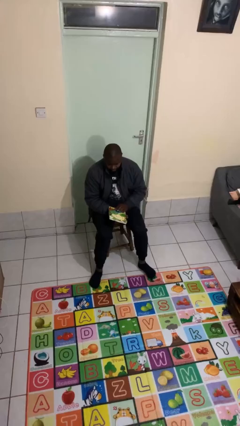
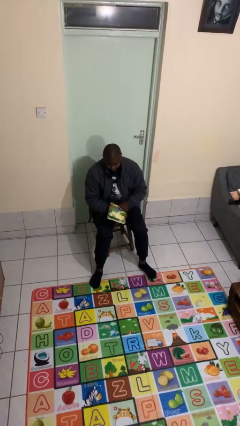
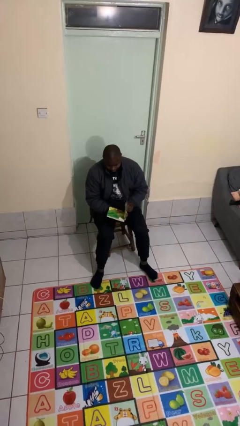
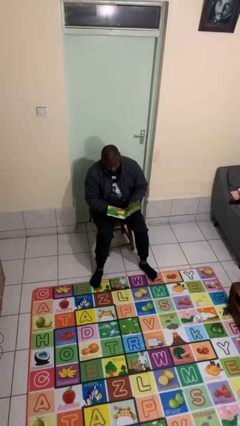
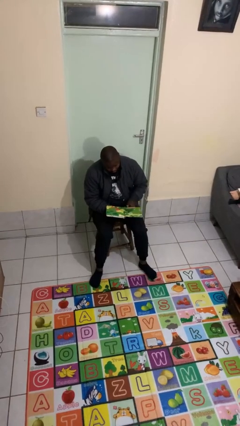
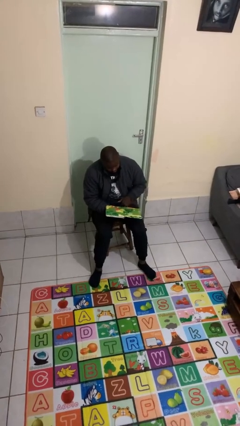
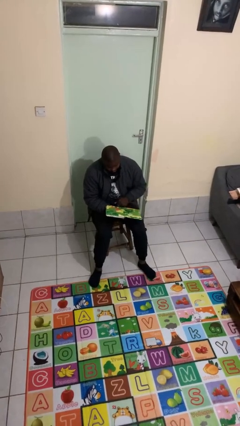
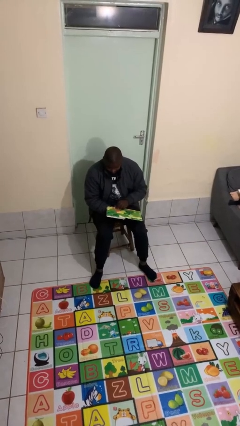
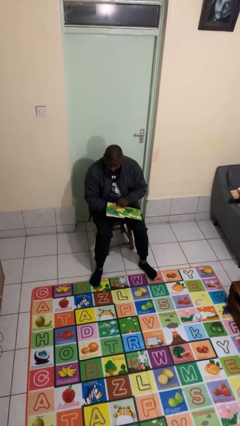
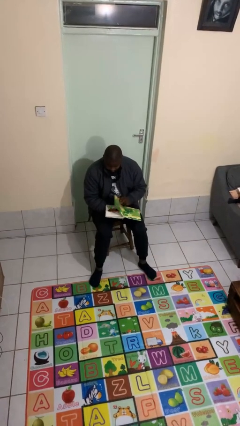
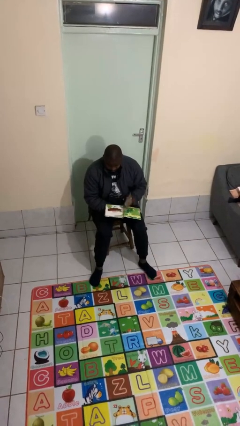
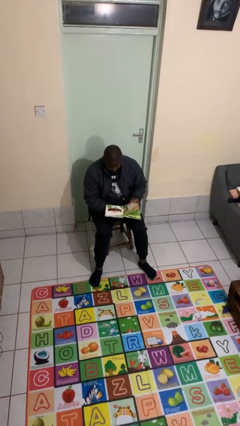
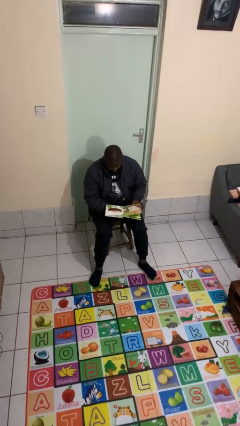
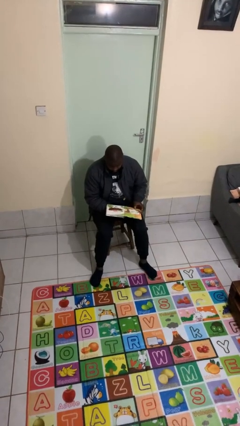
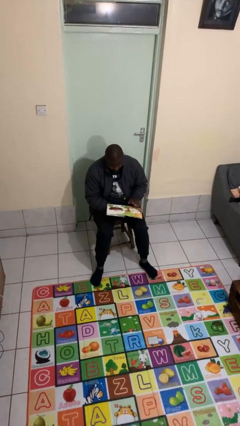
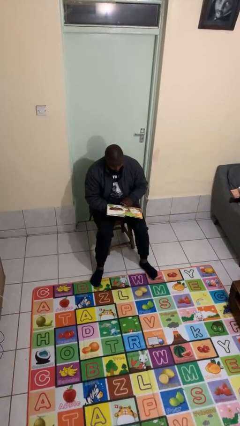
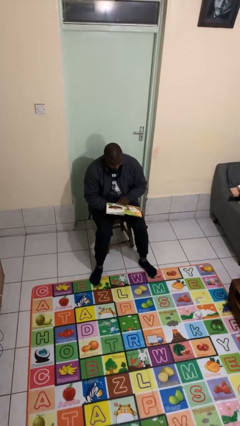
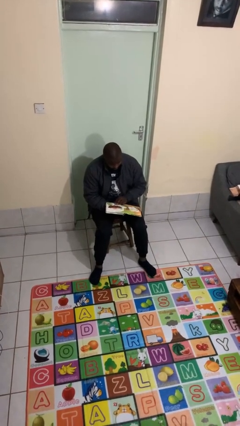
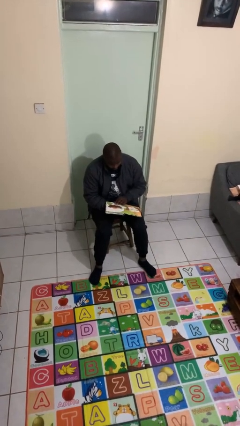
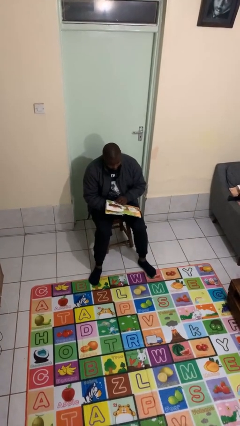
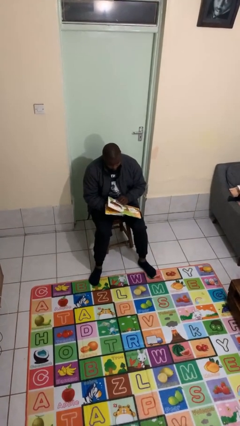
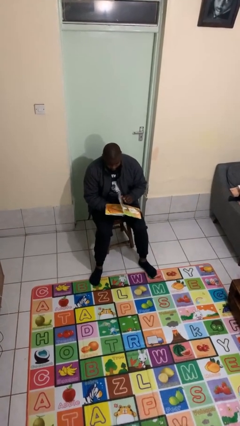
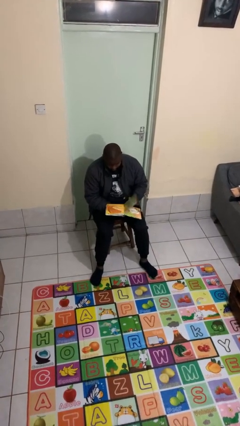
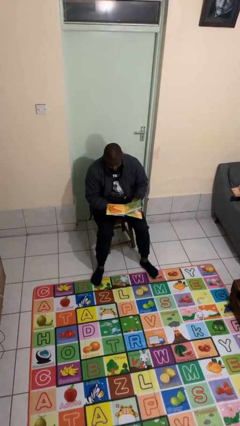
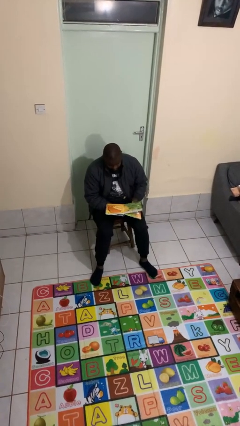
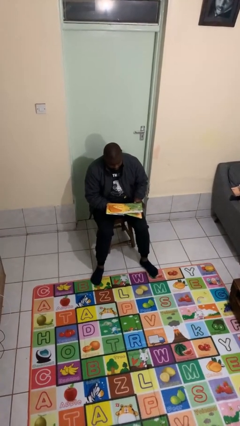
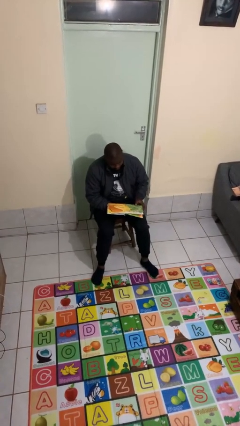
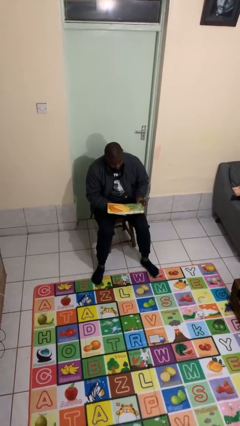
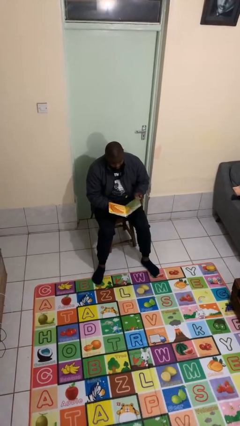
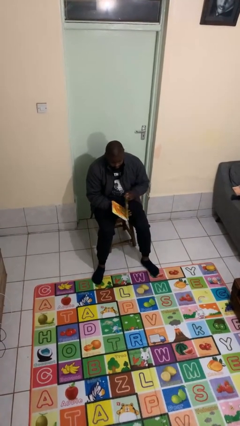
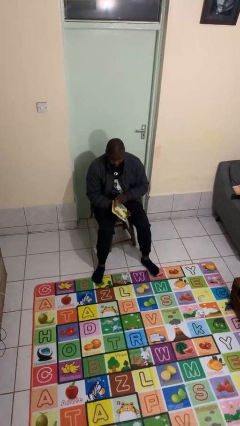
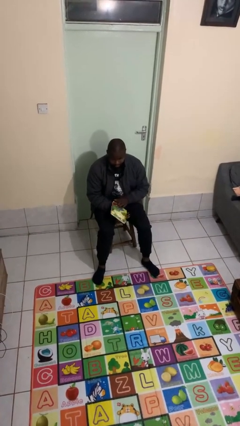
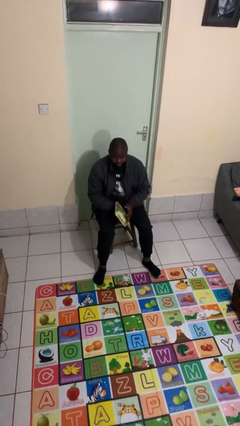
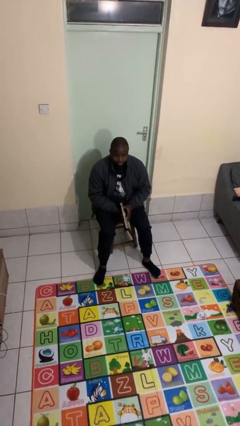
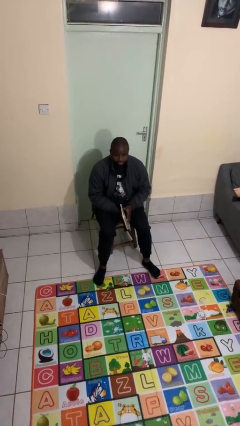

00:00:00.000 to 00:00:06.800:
person reads book

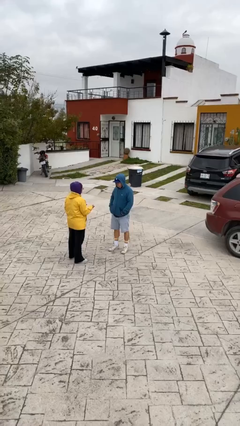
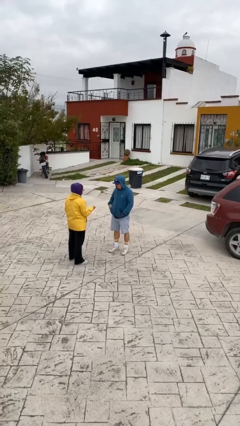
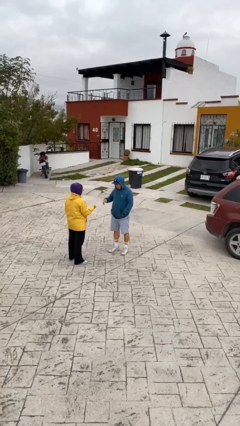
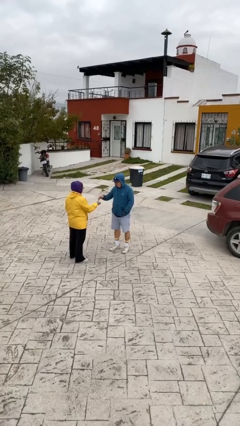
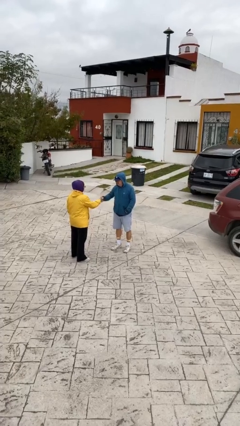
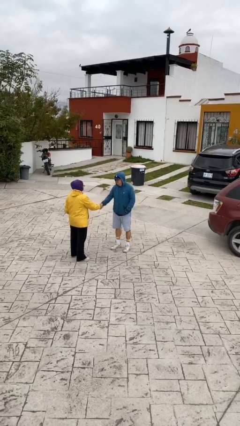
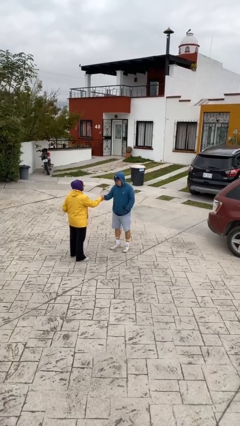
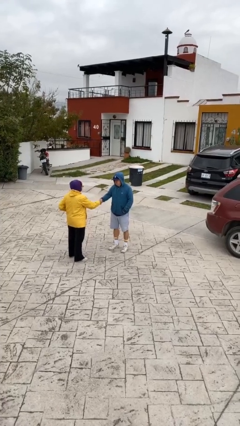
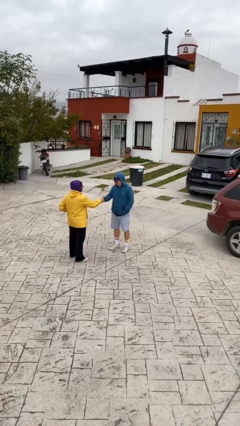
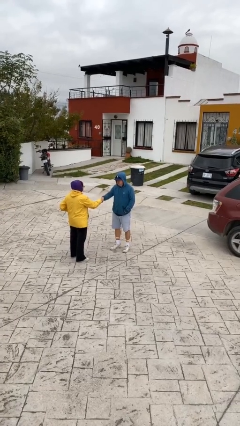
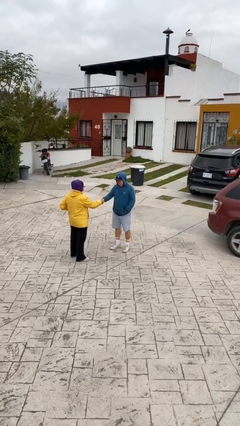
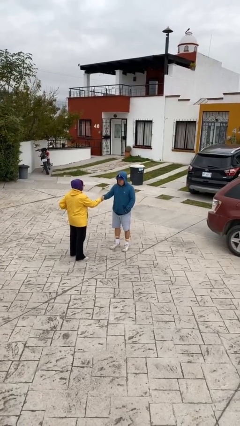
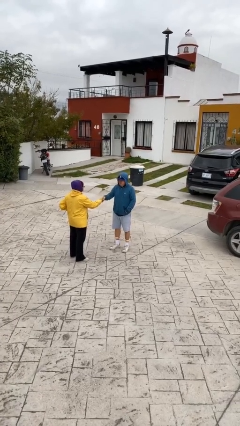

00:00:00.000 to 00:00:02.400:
person shakes hand

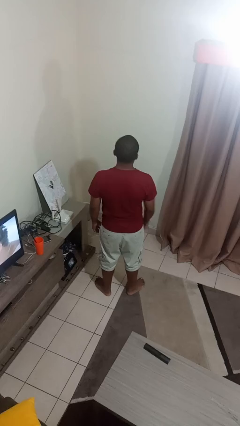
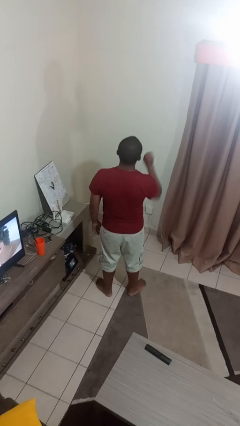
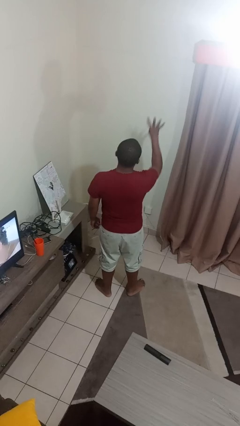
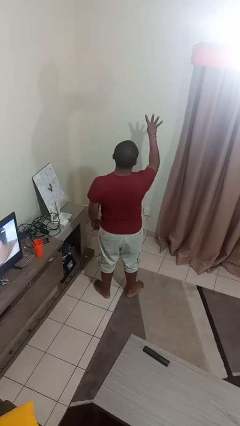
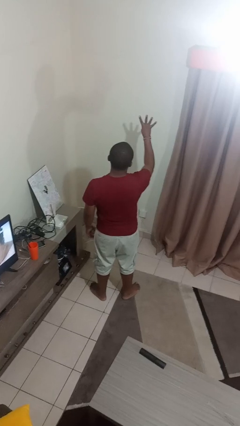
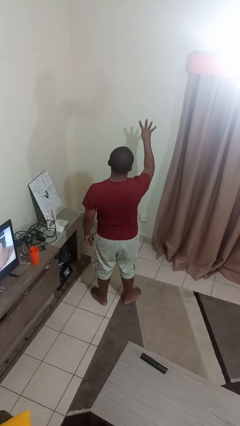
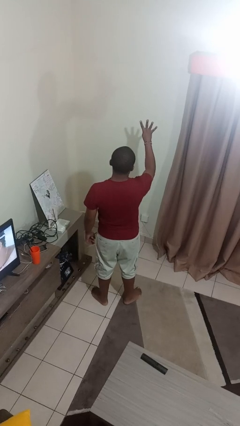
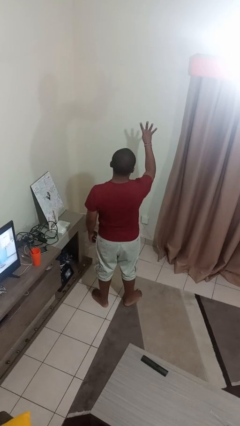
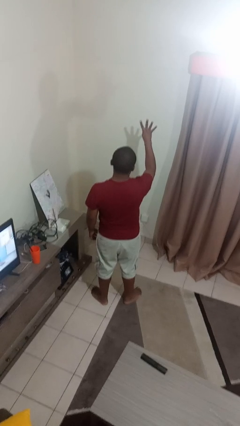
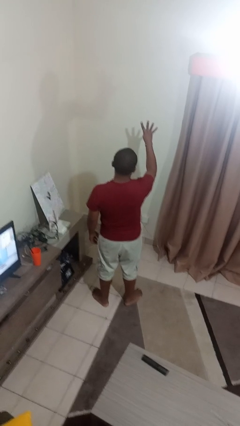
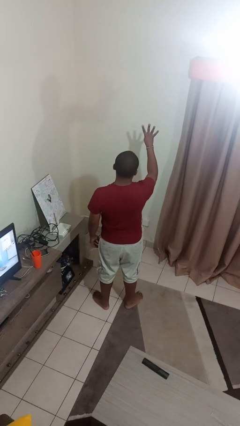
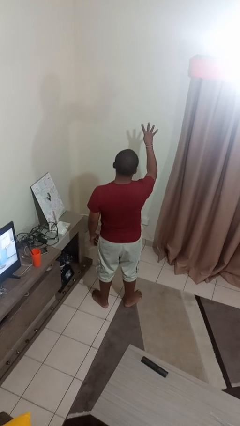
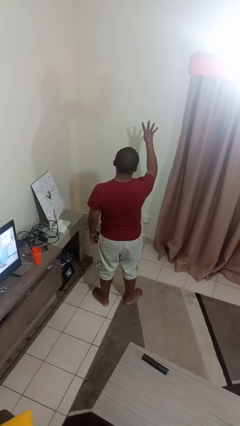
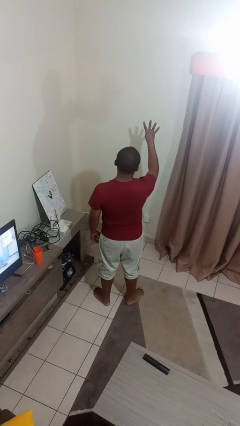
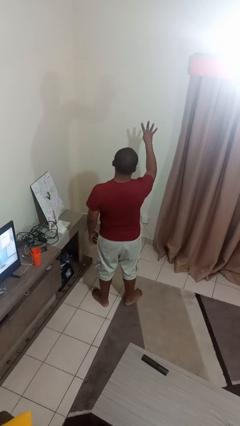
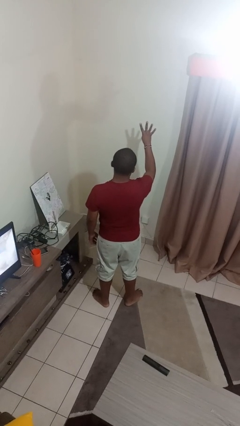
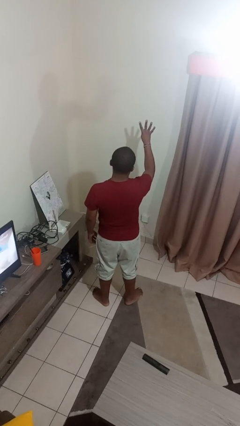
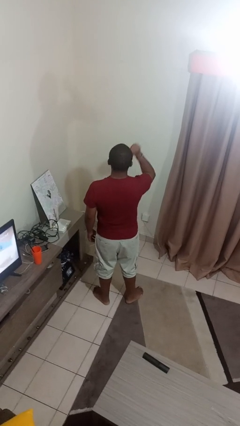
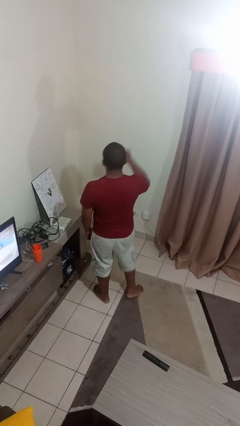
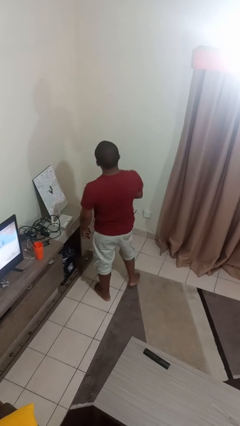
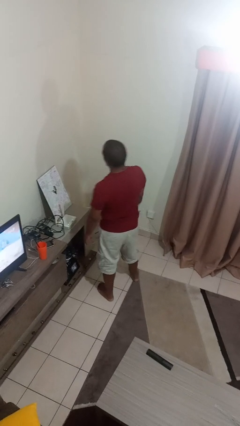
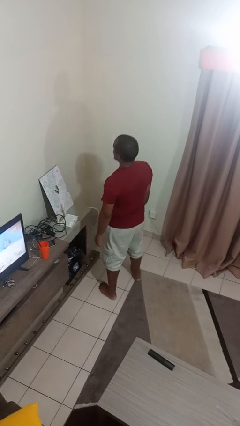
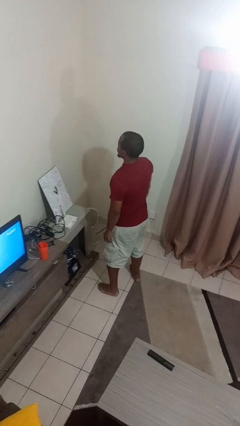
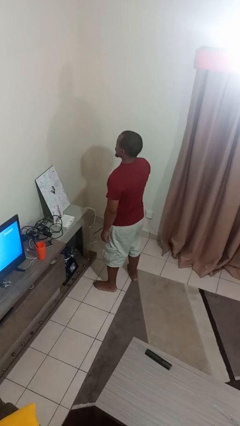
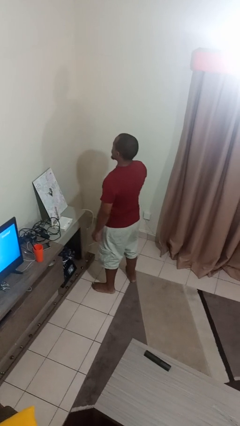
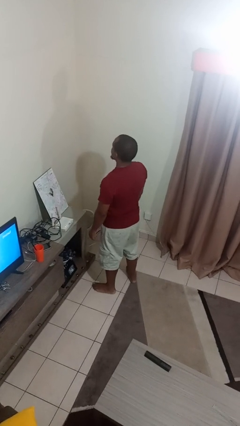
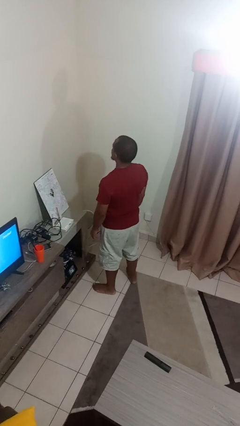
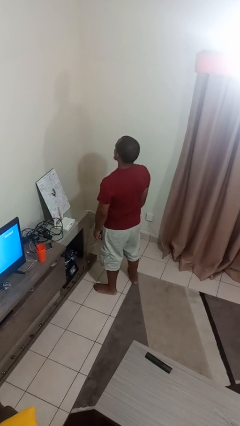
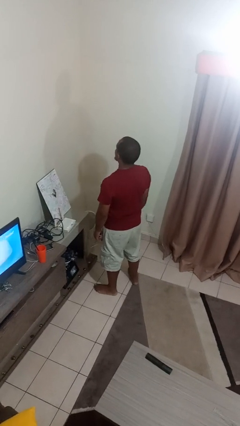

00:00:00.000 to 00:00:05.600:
person gestures number four

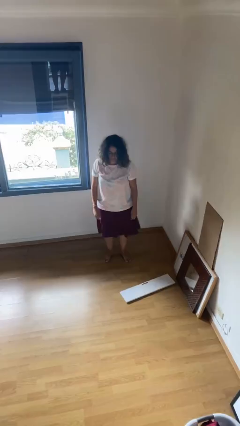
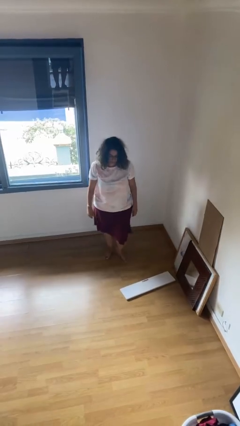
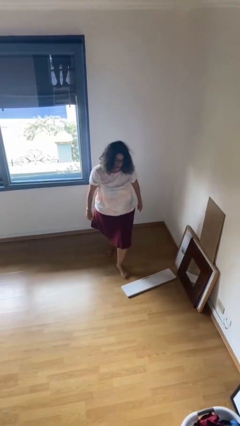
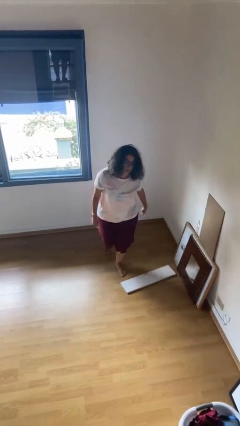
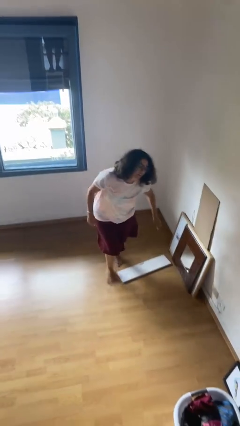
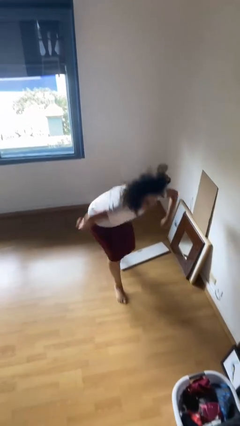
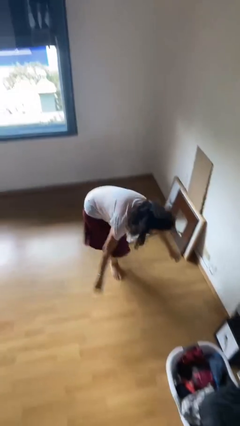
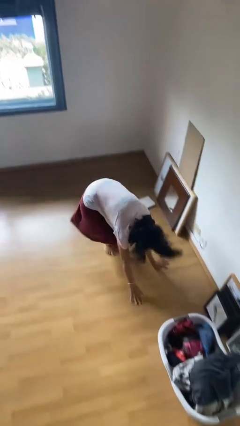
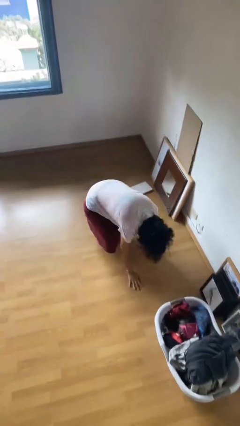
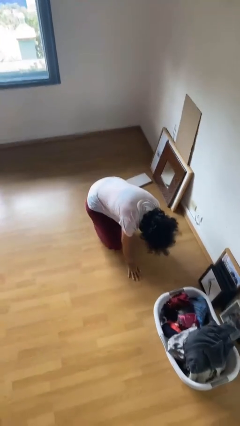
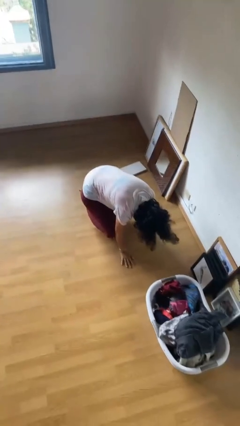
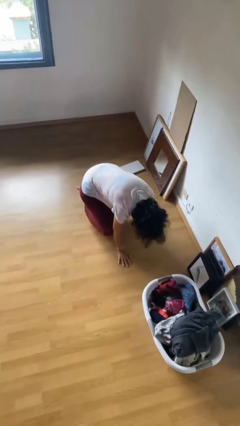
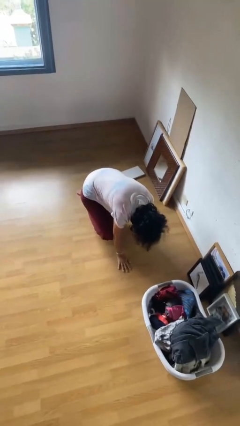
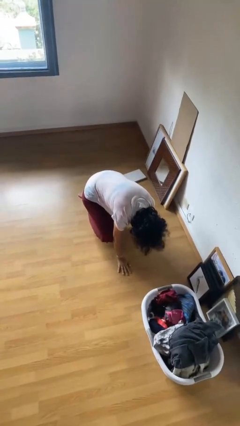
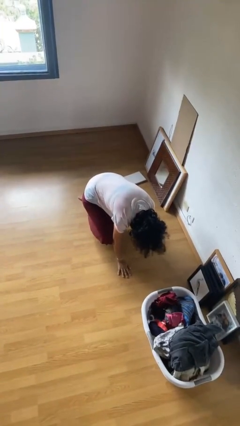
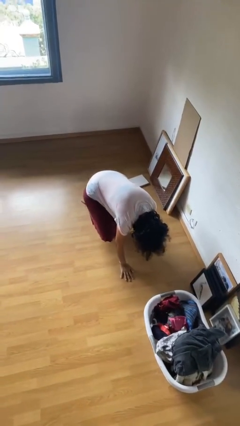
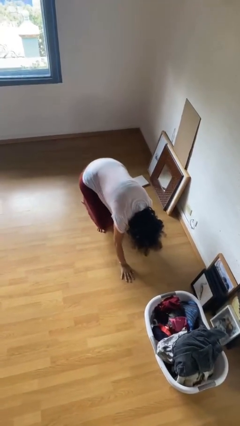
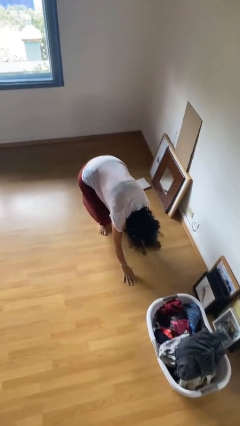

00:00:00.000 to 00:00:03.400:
person trips on object on floor
